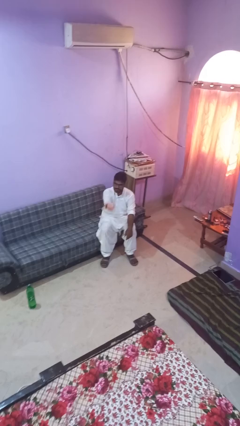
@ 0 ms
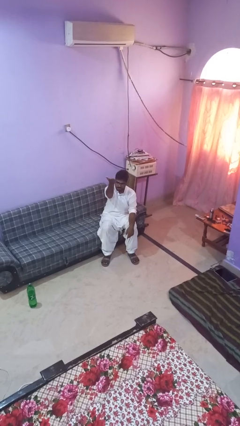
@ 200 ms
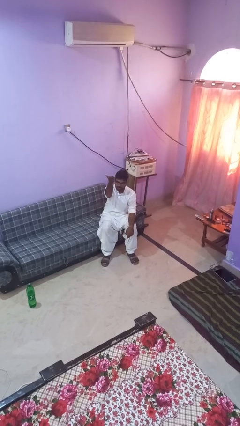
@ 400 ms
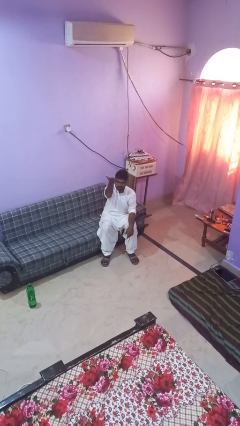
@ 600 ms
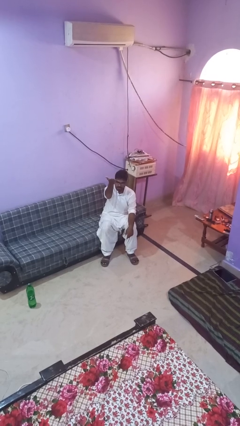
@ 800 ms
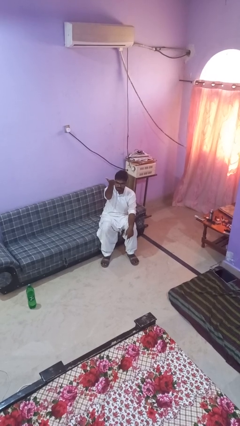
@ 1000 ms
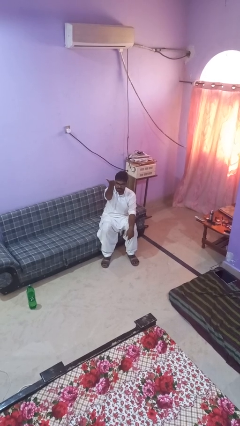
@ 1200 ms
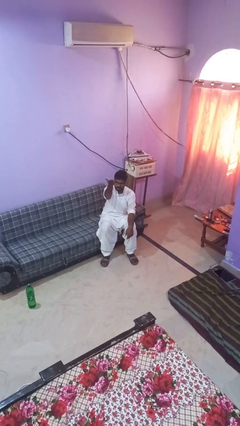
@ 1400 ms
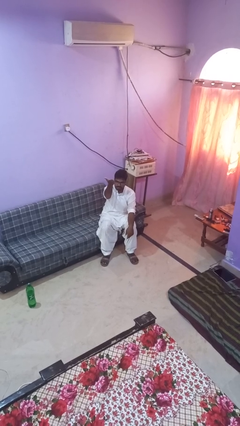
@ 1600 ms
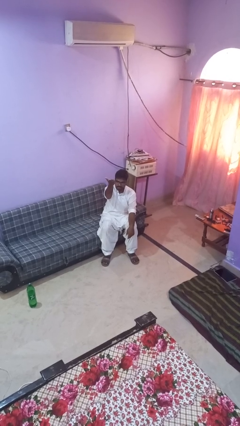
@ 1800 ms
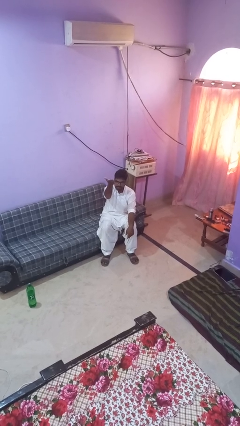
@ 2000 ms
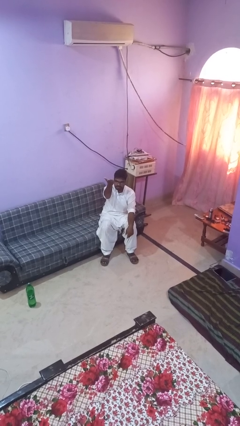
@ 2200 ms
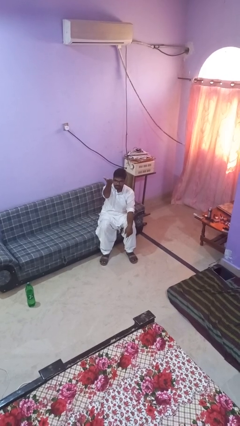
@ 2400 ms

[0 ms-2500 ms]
person gestures swipe up

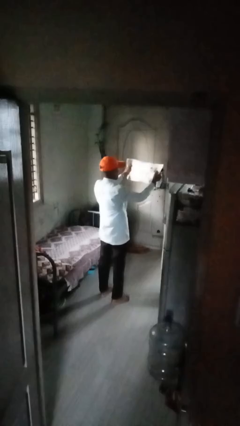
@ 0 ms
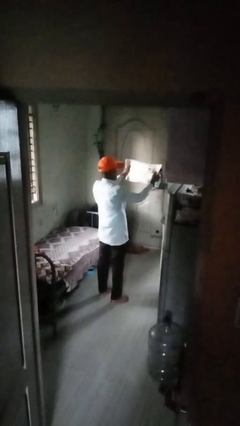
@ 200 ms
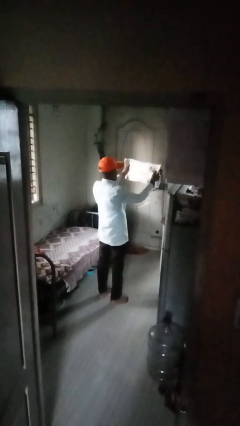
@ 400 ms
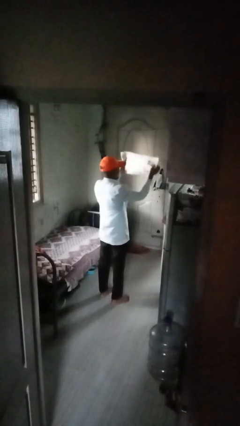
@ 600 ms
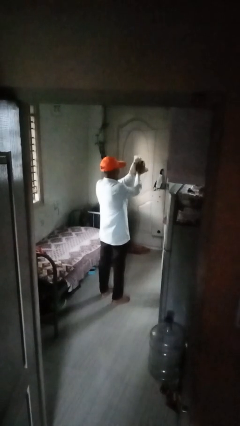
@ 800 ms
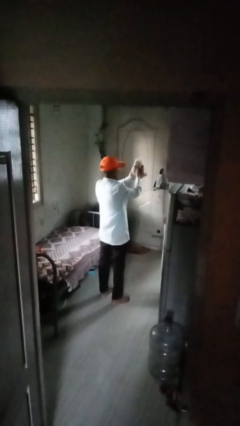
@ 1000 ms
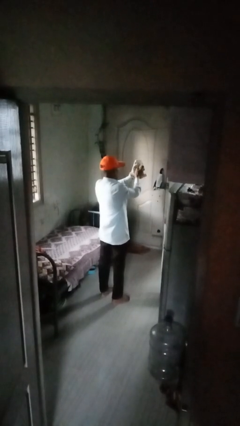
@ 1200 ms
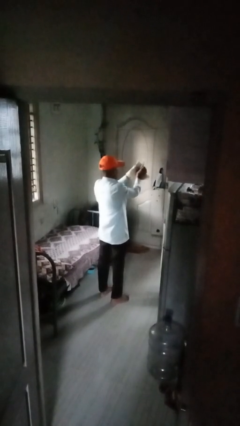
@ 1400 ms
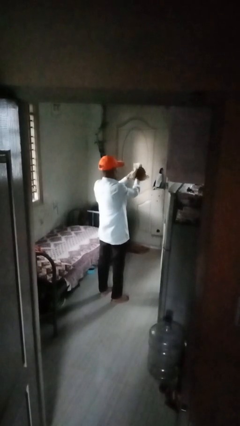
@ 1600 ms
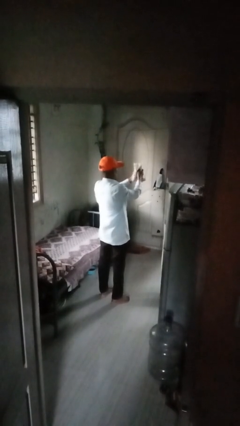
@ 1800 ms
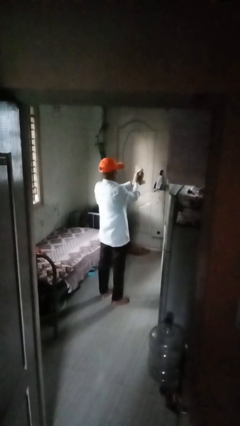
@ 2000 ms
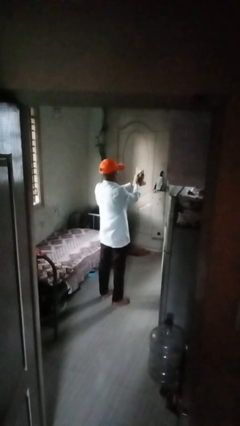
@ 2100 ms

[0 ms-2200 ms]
person crumples paper

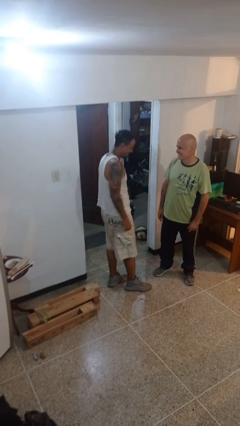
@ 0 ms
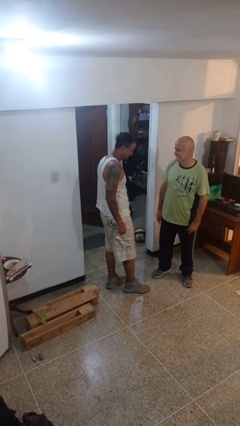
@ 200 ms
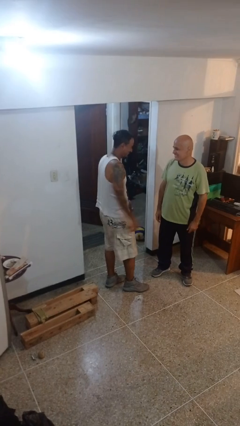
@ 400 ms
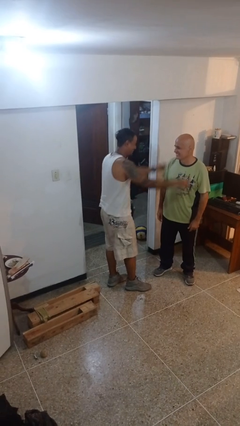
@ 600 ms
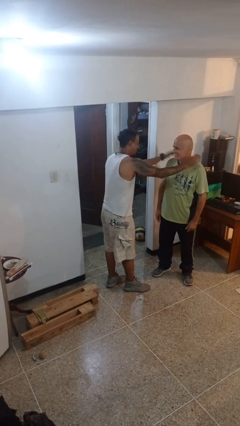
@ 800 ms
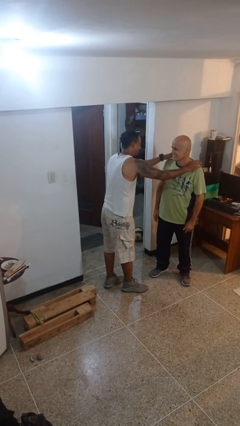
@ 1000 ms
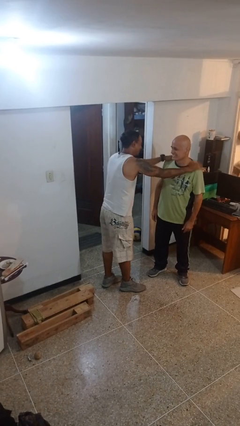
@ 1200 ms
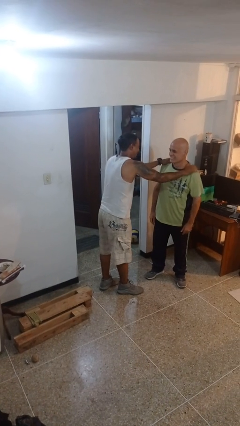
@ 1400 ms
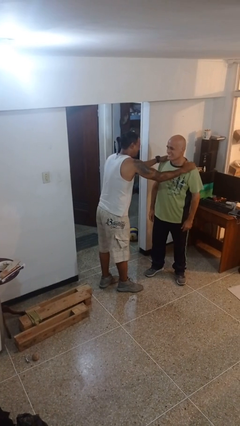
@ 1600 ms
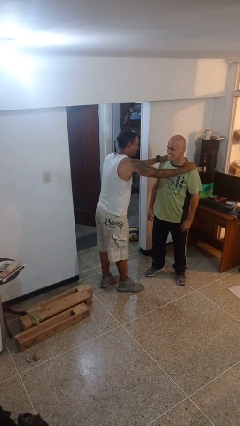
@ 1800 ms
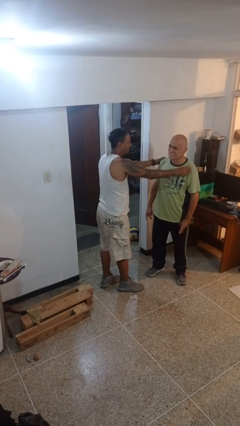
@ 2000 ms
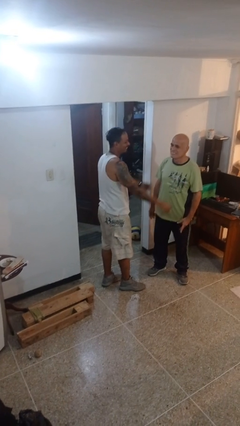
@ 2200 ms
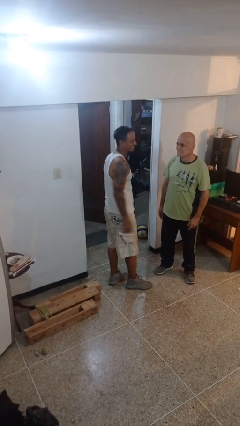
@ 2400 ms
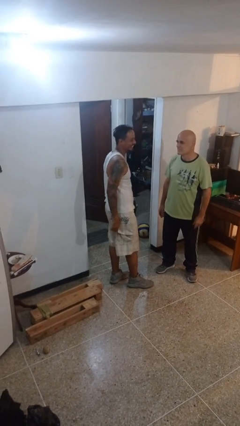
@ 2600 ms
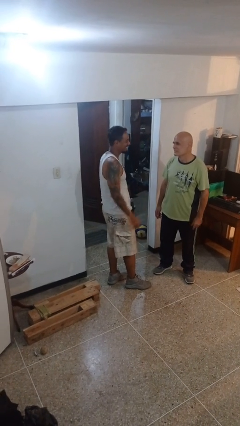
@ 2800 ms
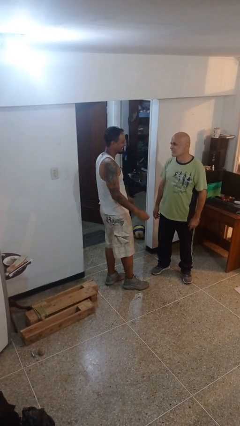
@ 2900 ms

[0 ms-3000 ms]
person pounds shoulders of person

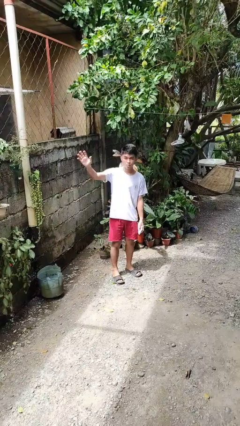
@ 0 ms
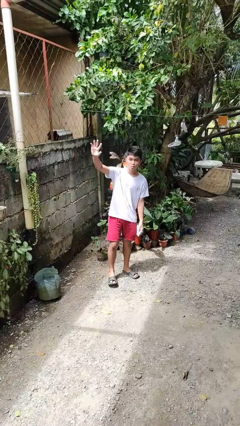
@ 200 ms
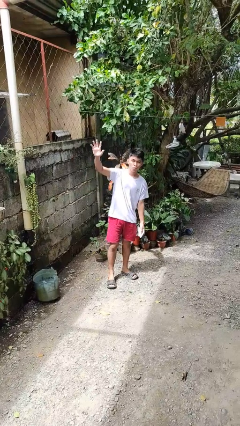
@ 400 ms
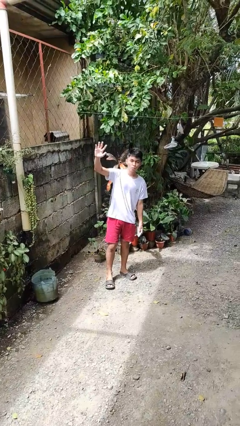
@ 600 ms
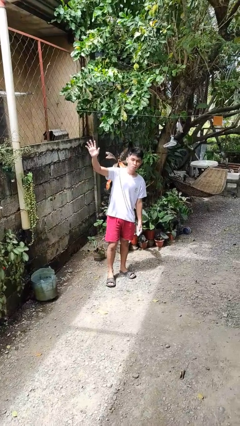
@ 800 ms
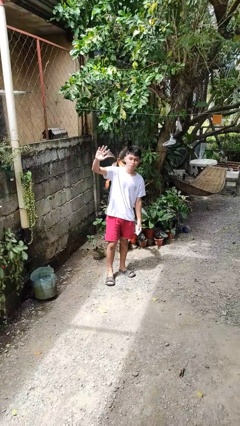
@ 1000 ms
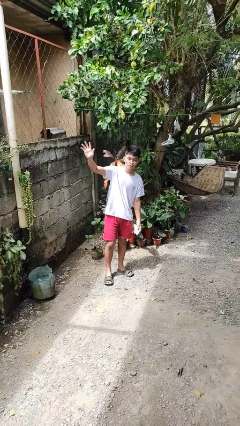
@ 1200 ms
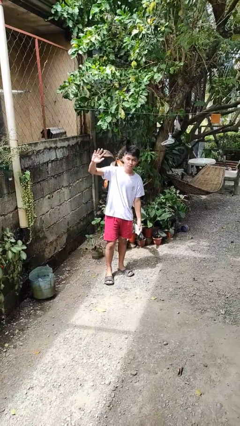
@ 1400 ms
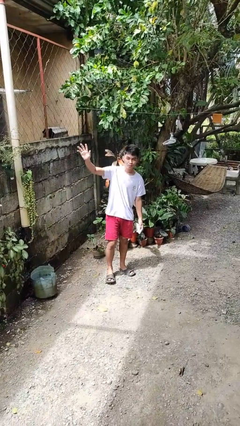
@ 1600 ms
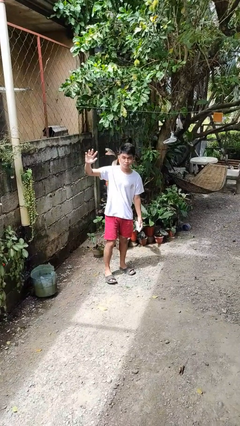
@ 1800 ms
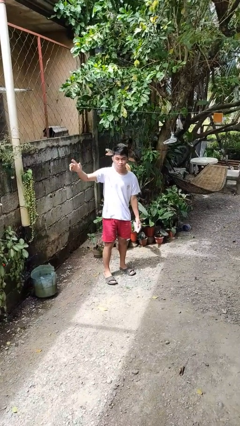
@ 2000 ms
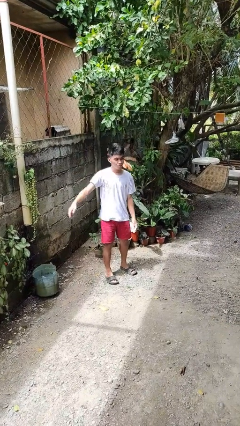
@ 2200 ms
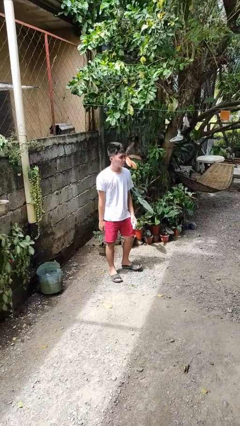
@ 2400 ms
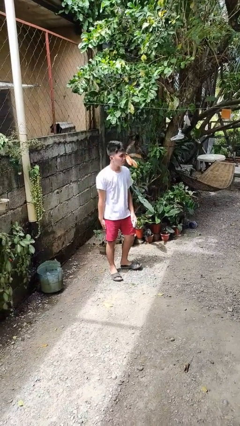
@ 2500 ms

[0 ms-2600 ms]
person waves at person

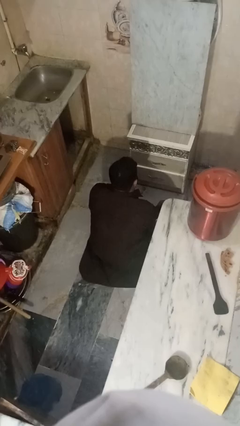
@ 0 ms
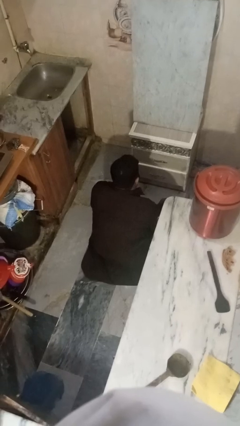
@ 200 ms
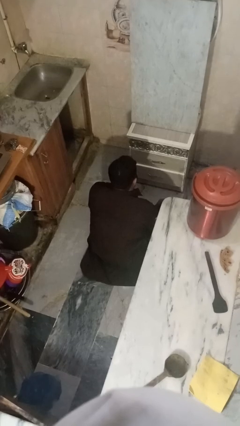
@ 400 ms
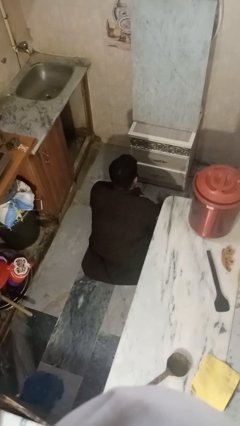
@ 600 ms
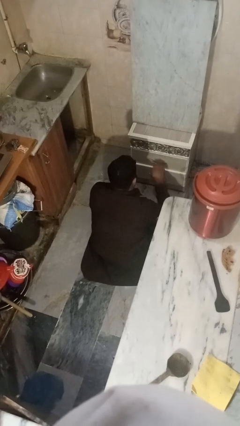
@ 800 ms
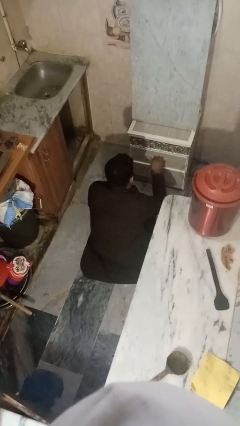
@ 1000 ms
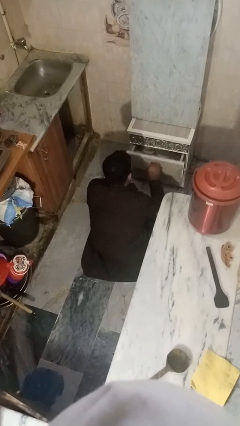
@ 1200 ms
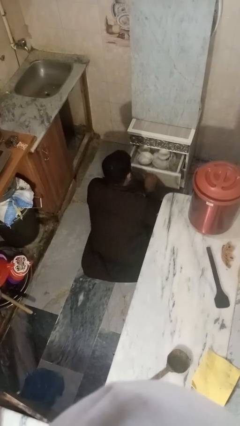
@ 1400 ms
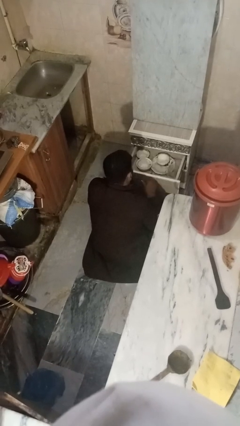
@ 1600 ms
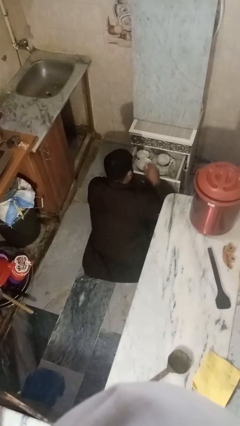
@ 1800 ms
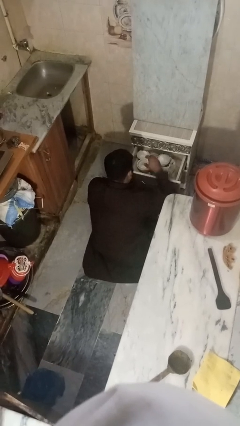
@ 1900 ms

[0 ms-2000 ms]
person searches in kitchen drawer

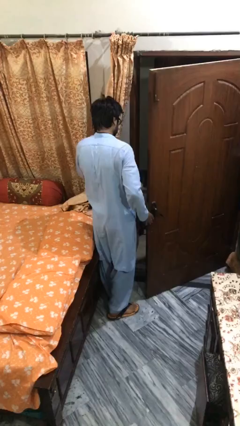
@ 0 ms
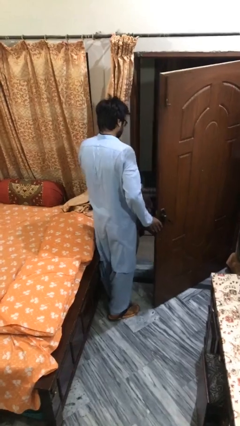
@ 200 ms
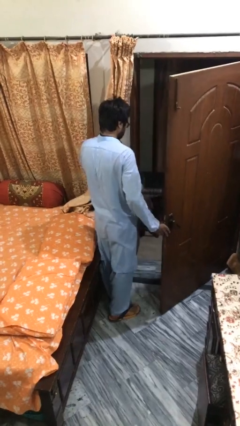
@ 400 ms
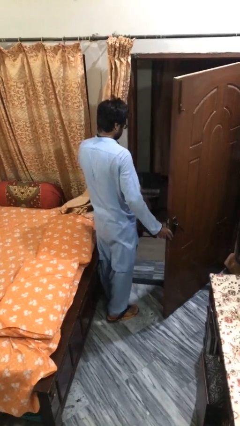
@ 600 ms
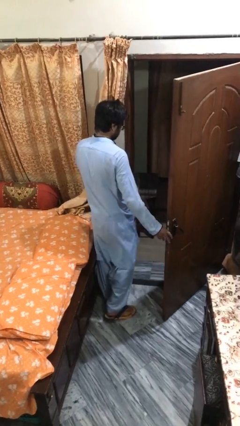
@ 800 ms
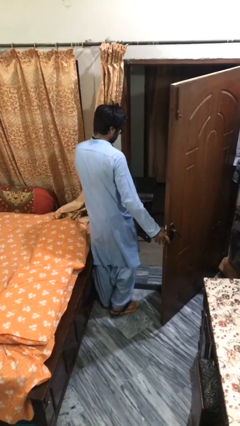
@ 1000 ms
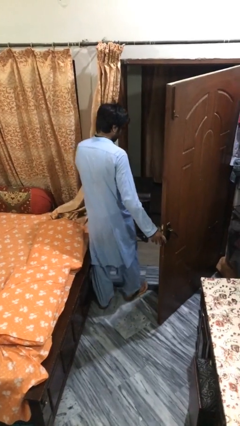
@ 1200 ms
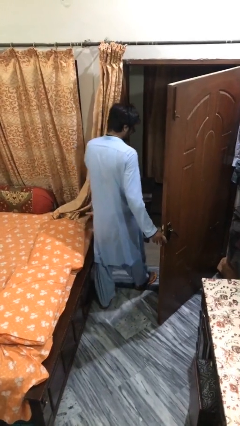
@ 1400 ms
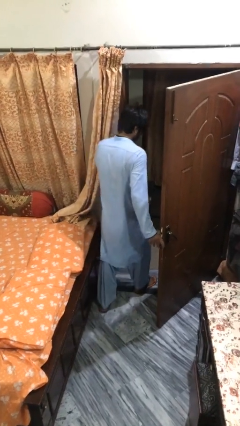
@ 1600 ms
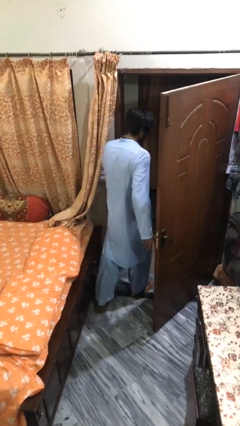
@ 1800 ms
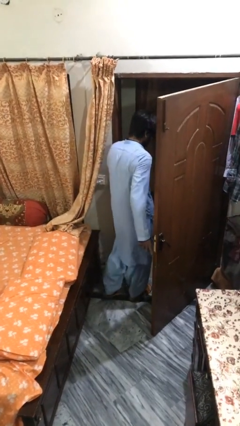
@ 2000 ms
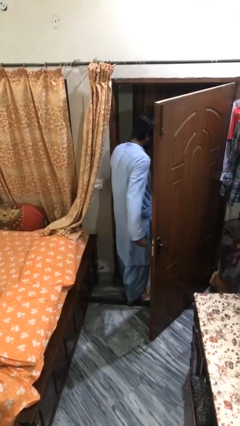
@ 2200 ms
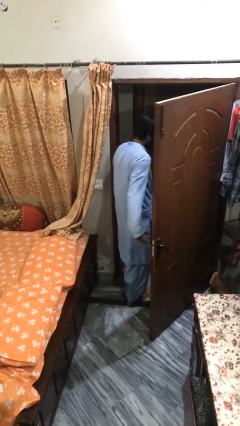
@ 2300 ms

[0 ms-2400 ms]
person exits scene through structure

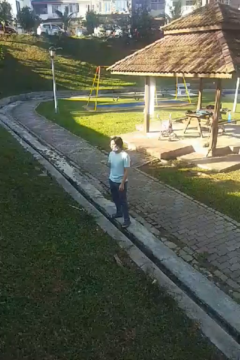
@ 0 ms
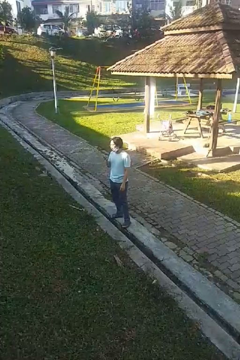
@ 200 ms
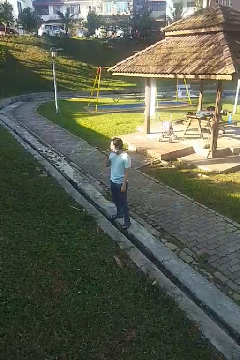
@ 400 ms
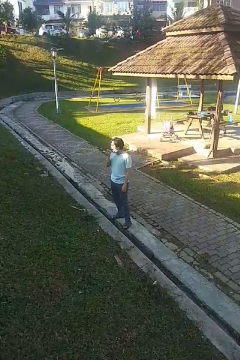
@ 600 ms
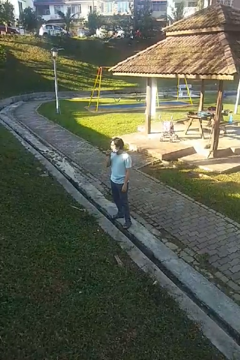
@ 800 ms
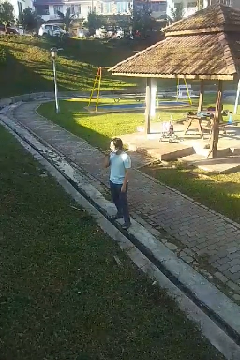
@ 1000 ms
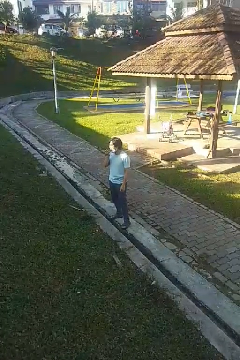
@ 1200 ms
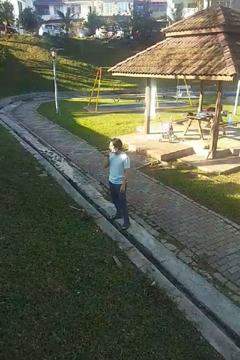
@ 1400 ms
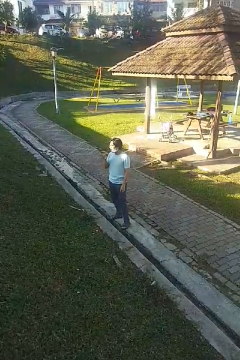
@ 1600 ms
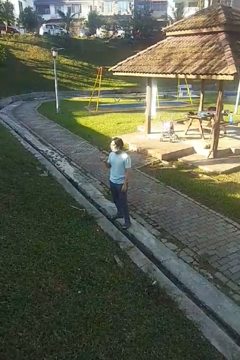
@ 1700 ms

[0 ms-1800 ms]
person flosses

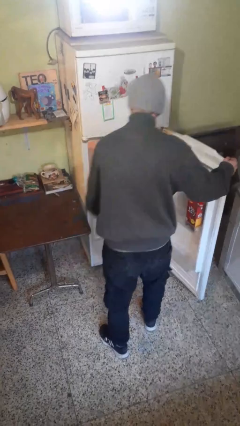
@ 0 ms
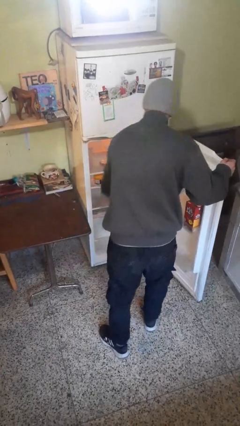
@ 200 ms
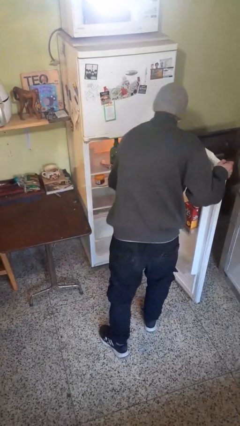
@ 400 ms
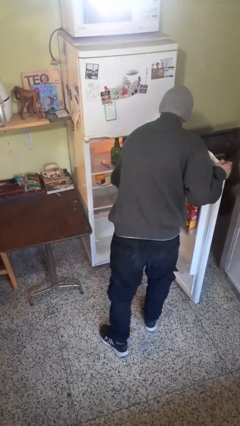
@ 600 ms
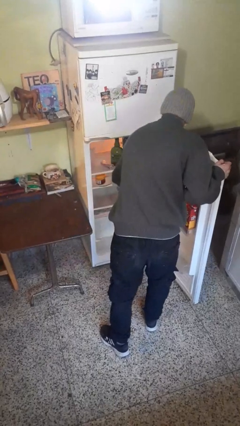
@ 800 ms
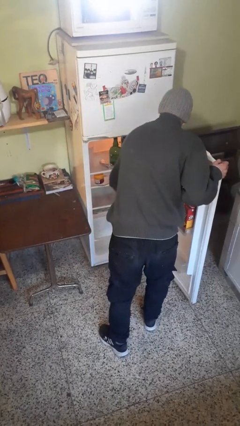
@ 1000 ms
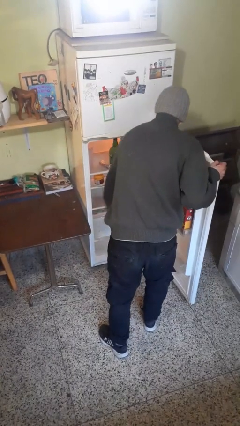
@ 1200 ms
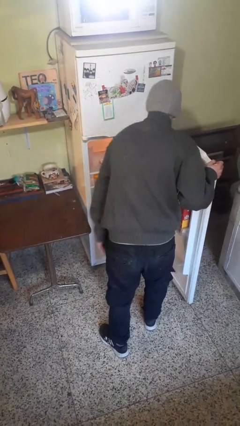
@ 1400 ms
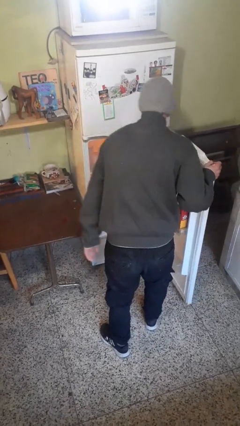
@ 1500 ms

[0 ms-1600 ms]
person puts object into refrigerator
